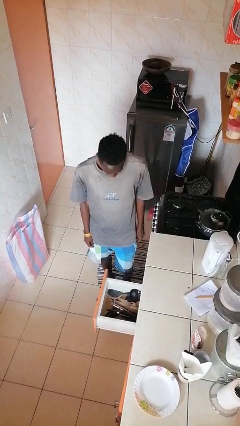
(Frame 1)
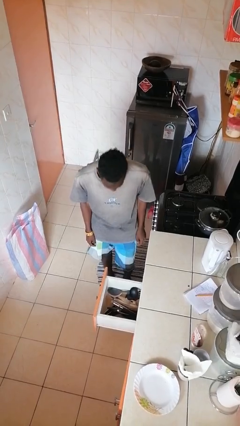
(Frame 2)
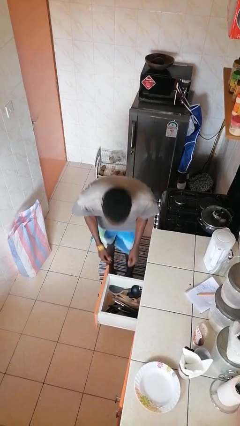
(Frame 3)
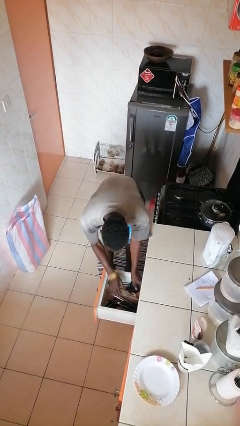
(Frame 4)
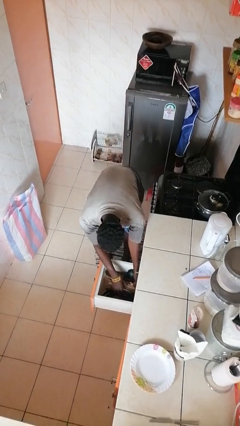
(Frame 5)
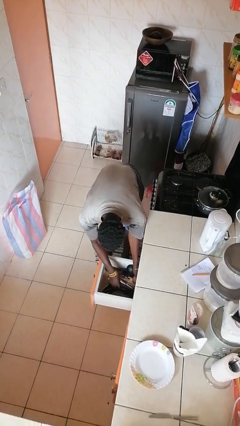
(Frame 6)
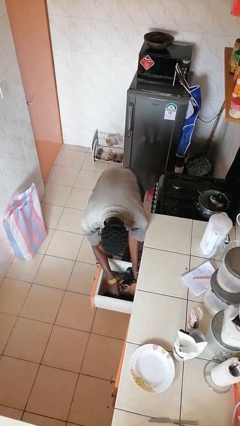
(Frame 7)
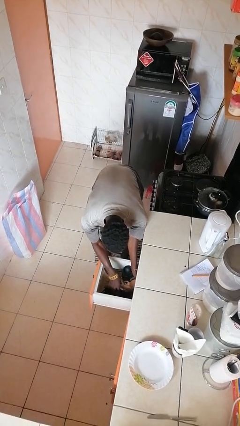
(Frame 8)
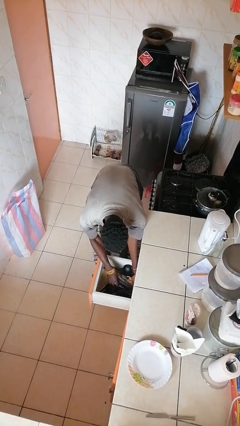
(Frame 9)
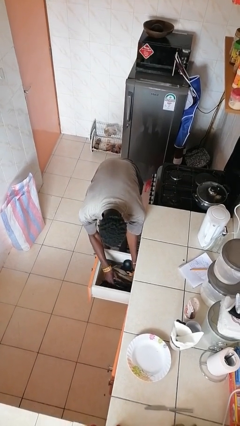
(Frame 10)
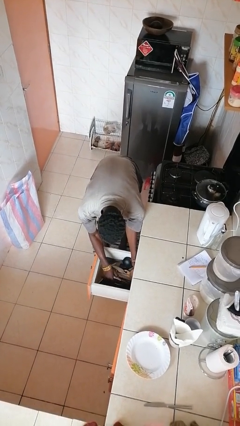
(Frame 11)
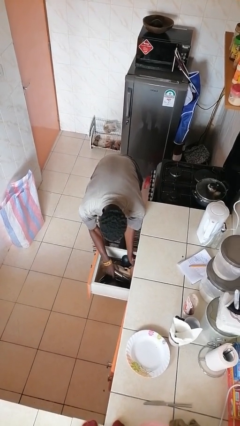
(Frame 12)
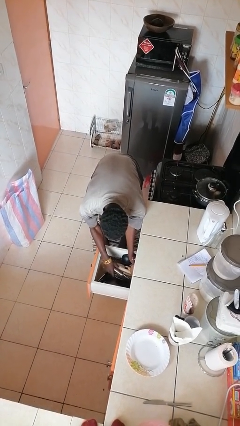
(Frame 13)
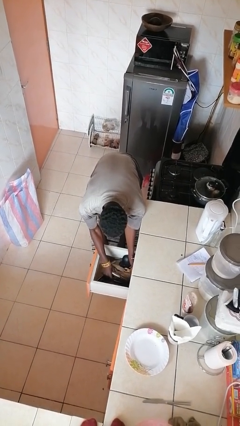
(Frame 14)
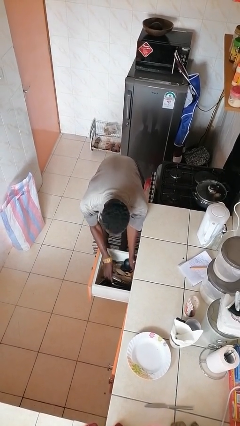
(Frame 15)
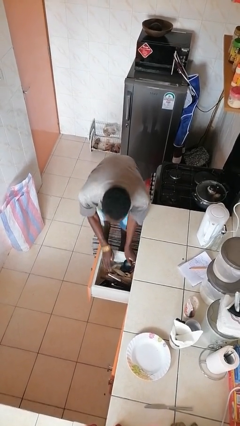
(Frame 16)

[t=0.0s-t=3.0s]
person searches in kitchen drawer

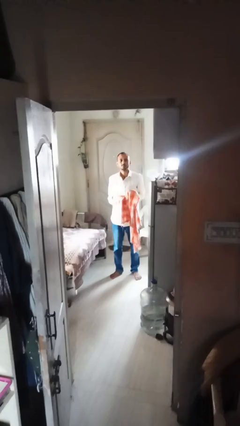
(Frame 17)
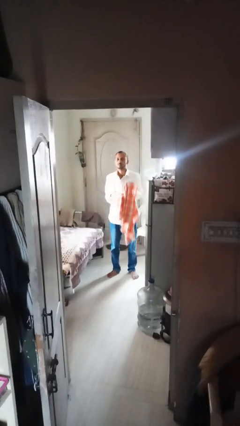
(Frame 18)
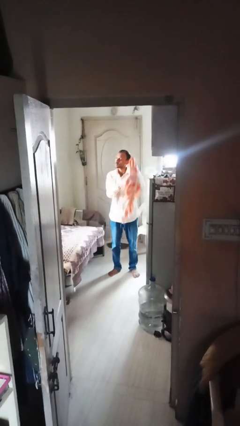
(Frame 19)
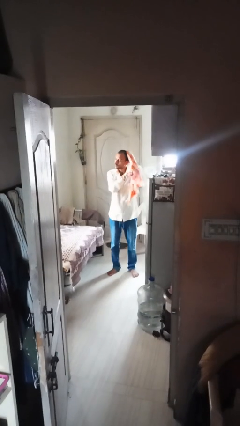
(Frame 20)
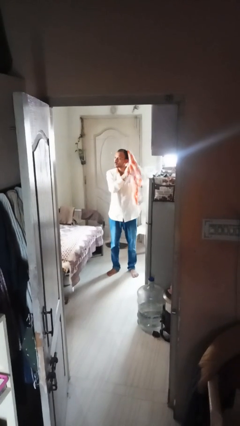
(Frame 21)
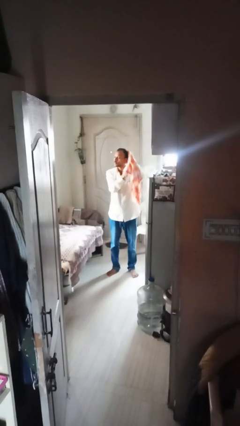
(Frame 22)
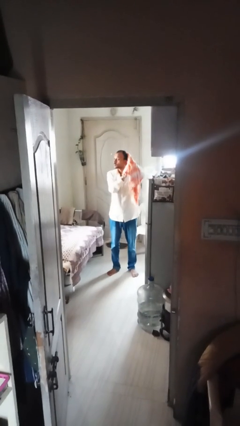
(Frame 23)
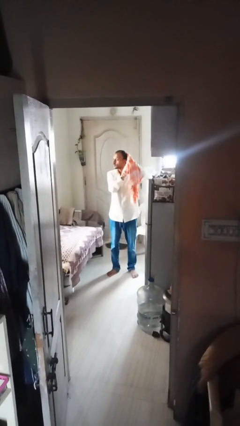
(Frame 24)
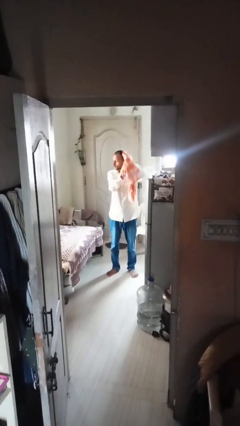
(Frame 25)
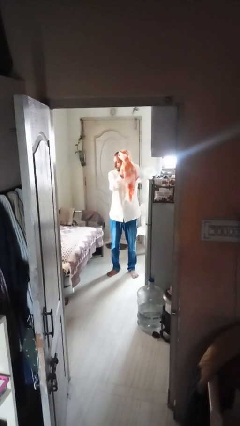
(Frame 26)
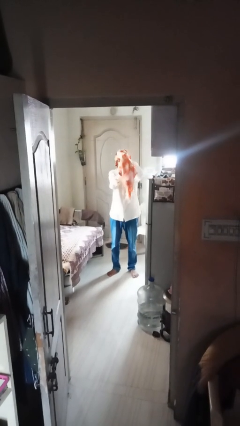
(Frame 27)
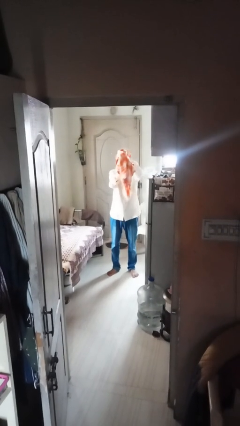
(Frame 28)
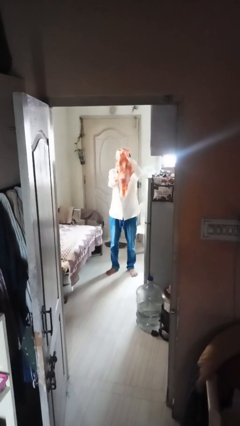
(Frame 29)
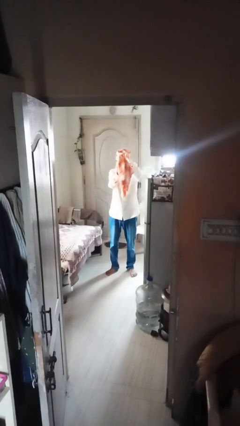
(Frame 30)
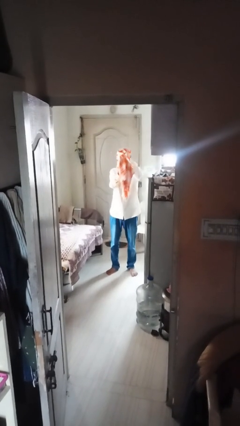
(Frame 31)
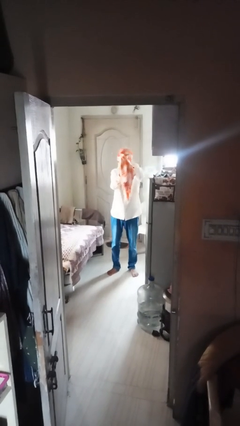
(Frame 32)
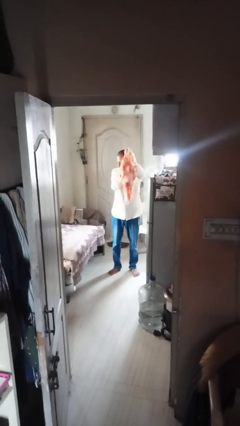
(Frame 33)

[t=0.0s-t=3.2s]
person dries hair with towel

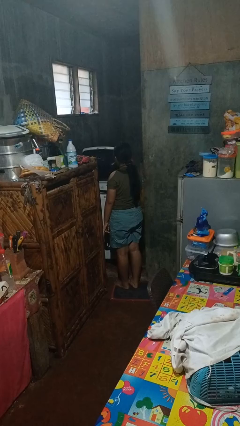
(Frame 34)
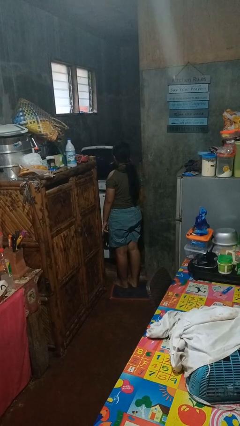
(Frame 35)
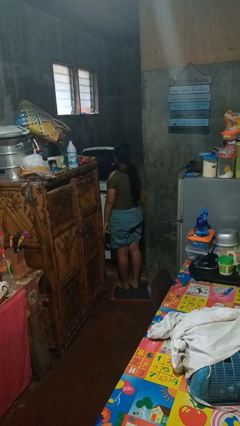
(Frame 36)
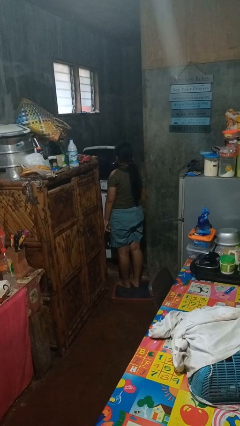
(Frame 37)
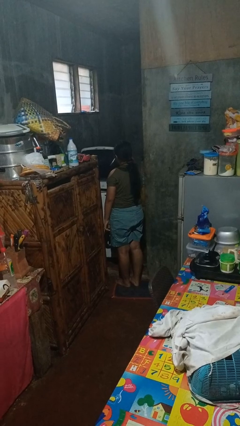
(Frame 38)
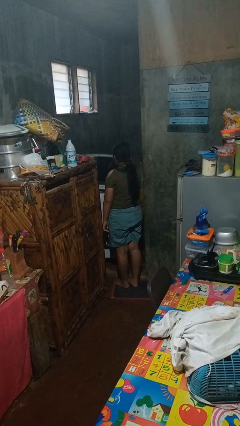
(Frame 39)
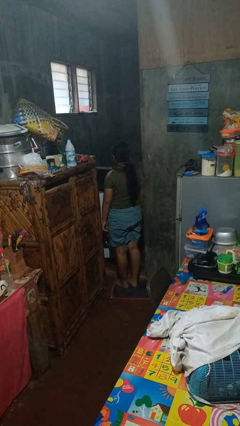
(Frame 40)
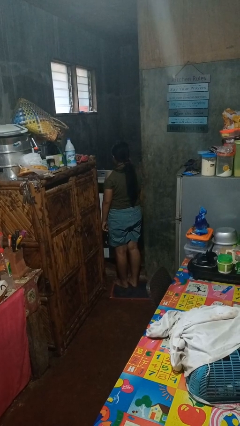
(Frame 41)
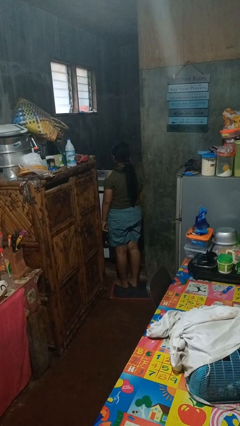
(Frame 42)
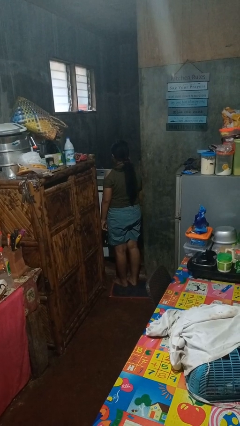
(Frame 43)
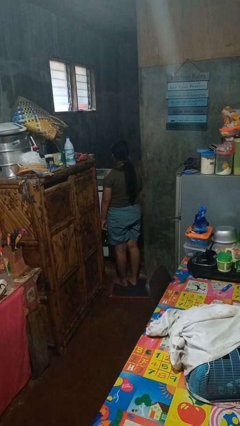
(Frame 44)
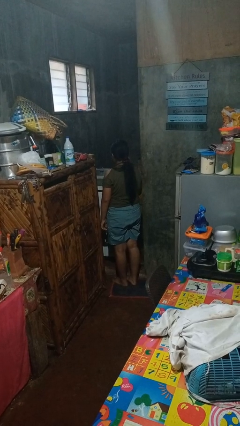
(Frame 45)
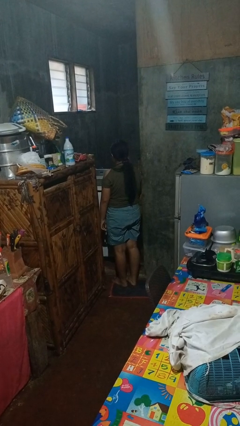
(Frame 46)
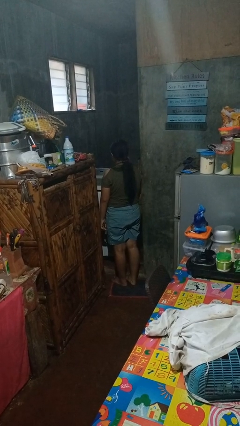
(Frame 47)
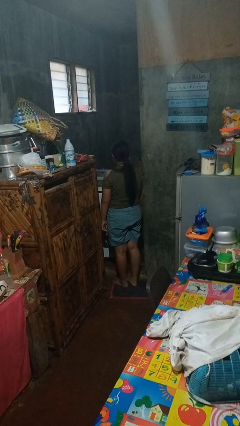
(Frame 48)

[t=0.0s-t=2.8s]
person closes clothes washer

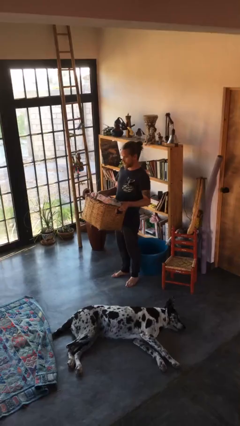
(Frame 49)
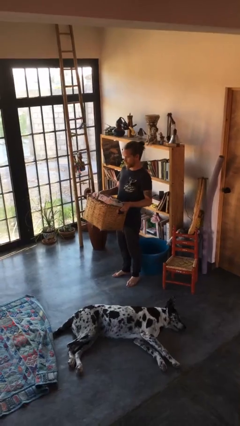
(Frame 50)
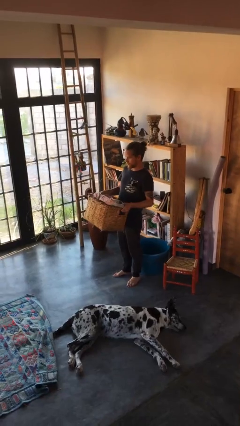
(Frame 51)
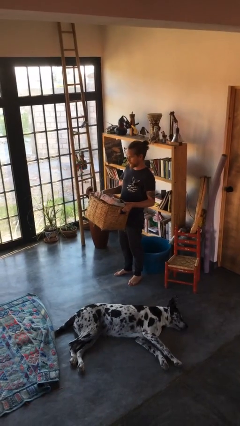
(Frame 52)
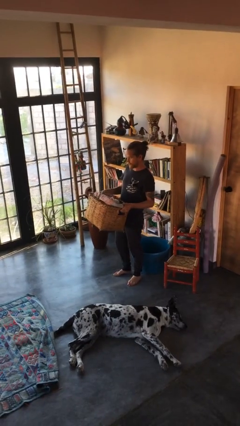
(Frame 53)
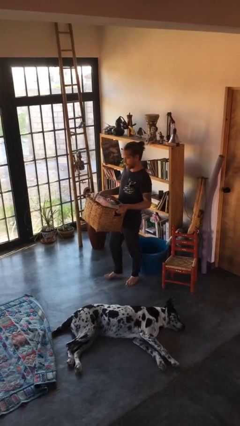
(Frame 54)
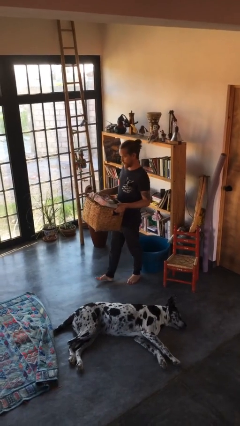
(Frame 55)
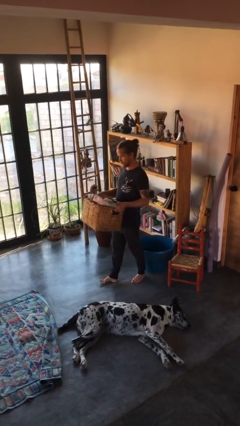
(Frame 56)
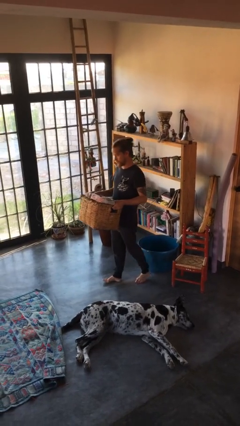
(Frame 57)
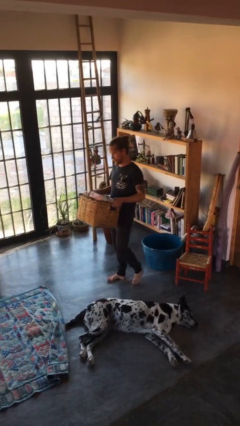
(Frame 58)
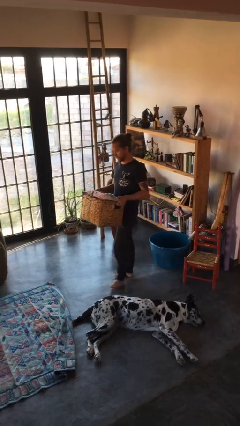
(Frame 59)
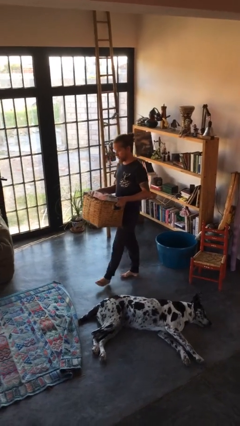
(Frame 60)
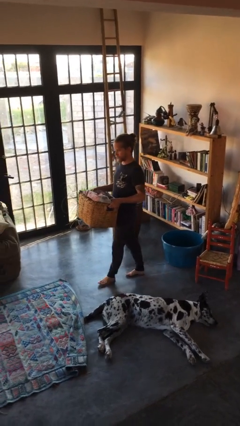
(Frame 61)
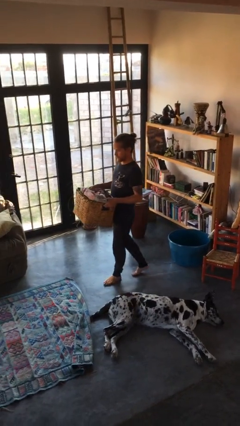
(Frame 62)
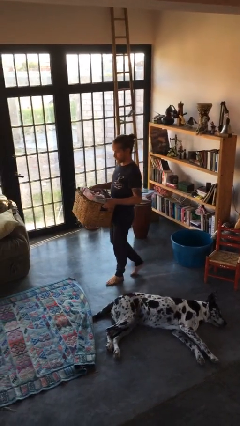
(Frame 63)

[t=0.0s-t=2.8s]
person carries laundry basket

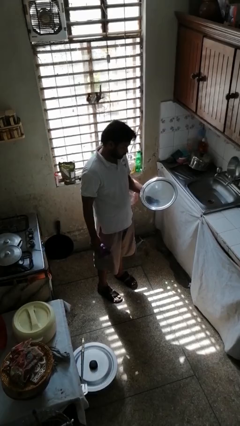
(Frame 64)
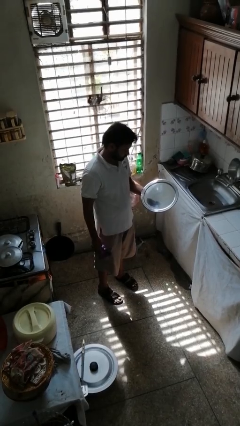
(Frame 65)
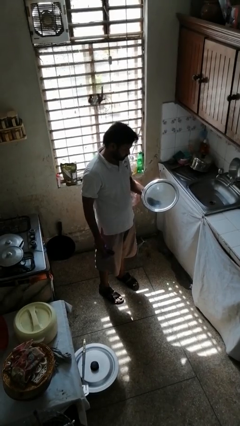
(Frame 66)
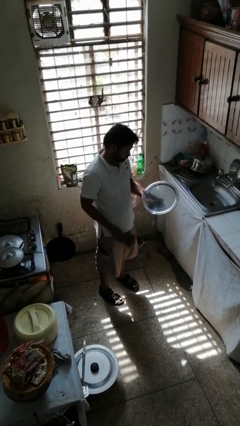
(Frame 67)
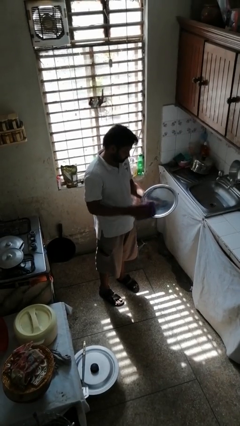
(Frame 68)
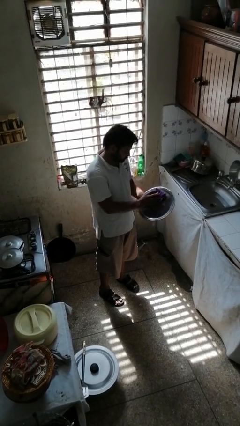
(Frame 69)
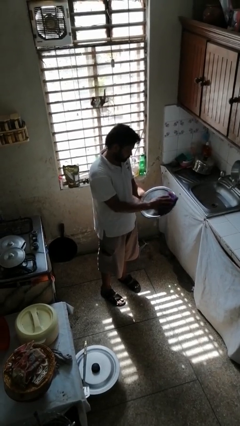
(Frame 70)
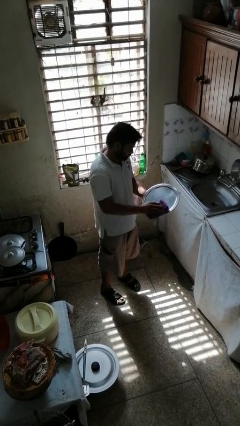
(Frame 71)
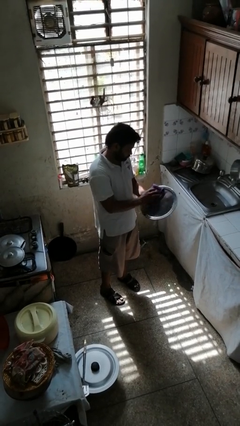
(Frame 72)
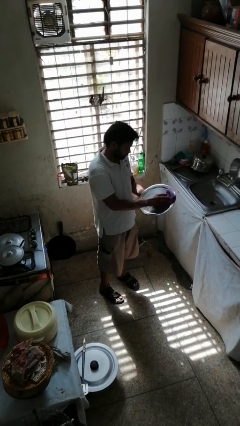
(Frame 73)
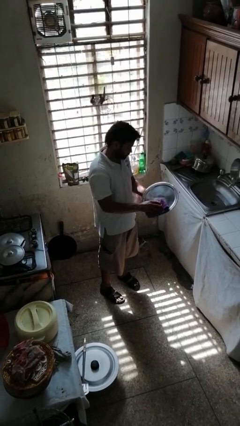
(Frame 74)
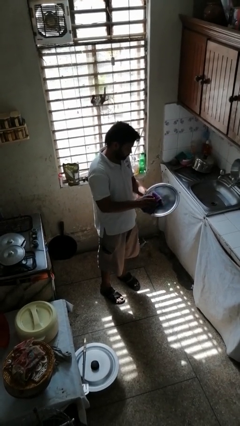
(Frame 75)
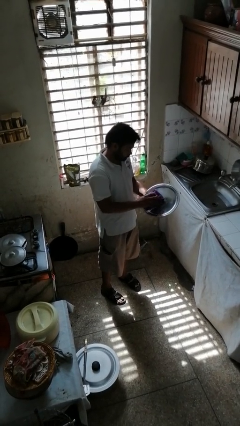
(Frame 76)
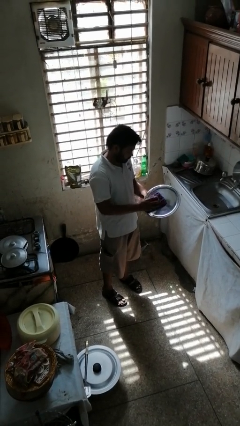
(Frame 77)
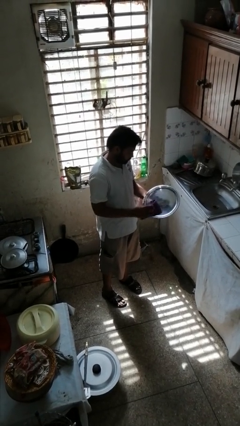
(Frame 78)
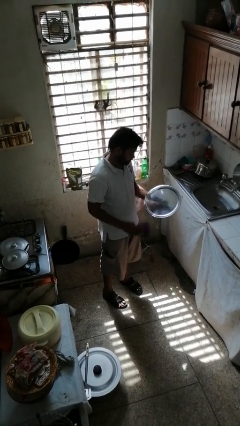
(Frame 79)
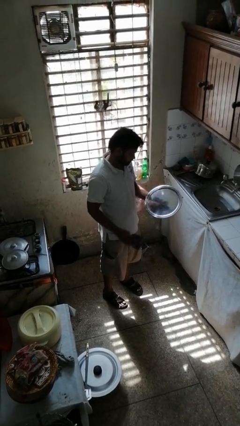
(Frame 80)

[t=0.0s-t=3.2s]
person dries dish

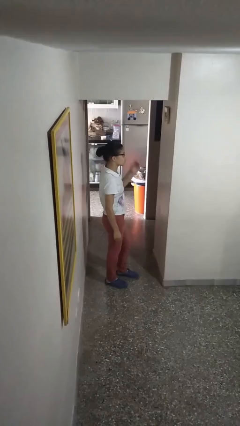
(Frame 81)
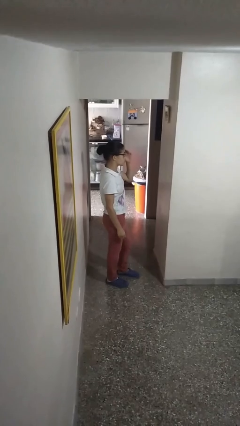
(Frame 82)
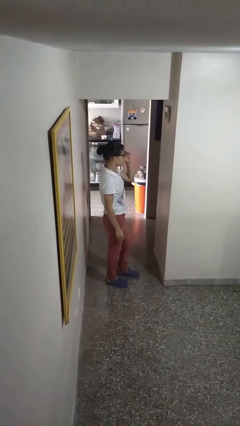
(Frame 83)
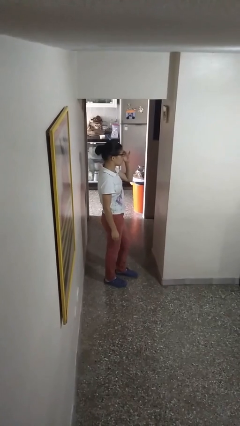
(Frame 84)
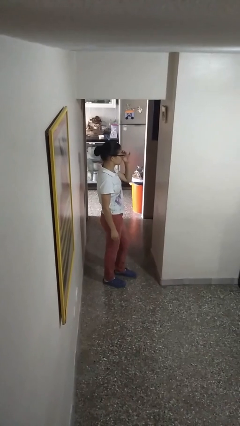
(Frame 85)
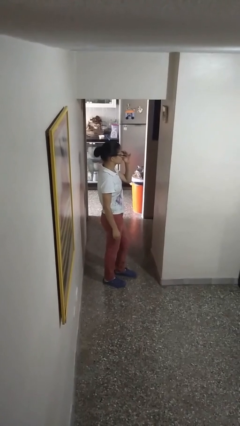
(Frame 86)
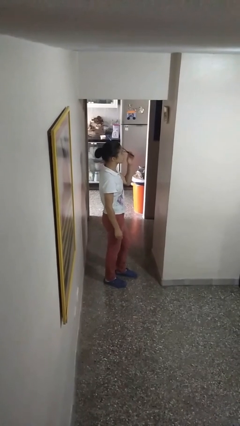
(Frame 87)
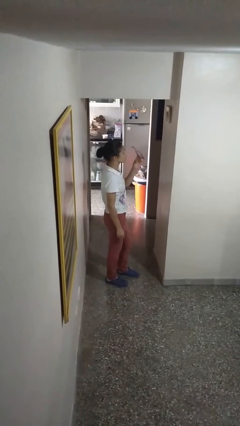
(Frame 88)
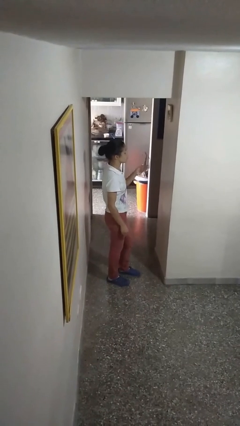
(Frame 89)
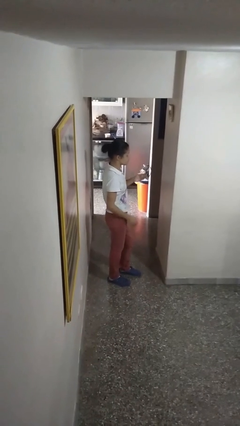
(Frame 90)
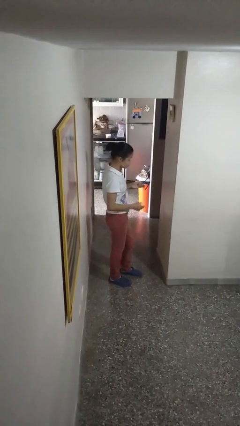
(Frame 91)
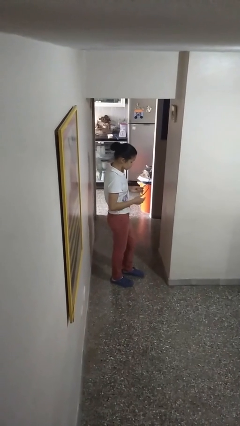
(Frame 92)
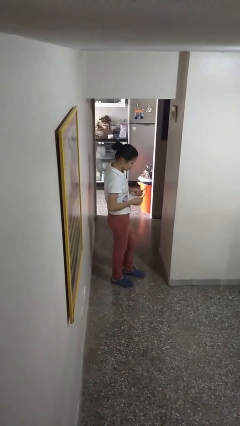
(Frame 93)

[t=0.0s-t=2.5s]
person takes off glasses

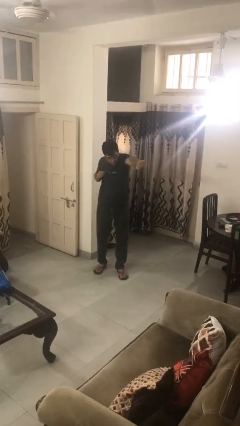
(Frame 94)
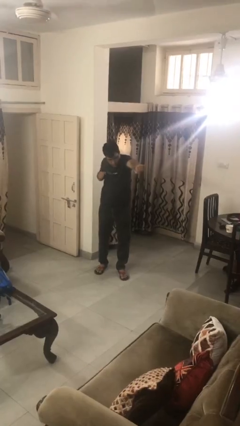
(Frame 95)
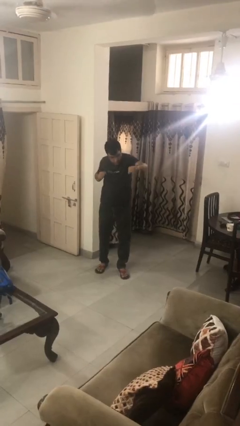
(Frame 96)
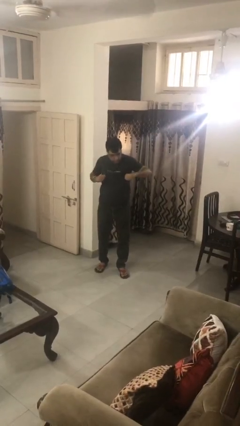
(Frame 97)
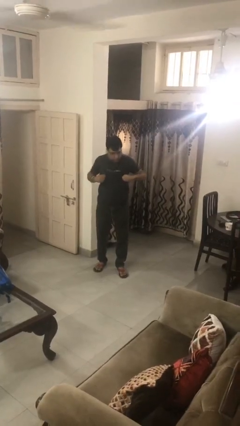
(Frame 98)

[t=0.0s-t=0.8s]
person punches